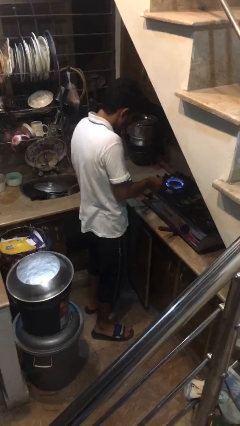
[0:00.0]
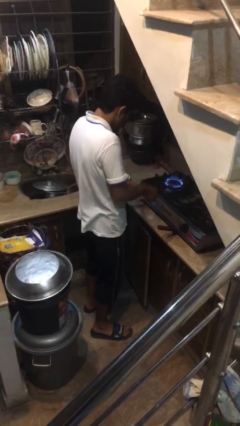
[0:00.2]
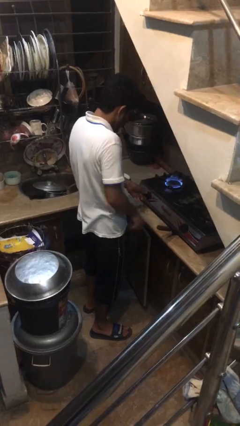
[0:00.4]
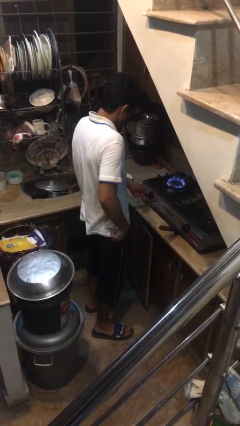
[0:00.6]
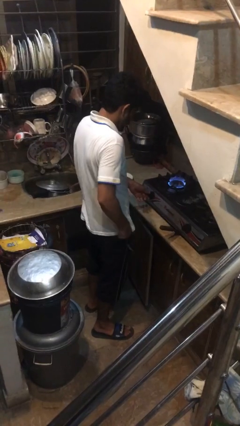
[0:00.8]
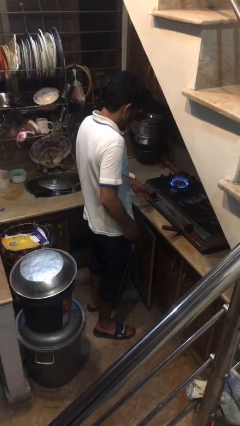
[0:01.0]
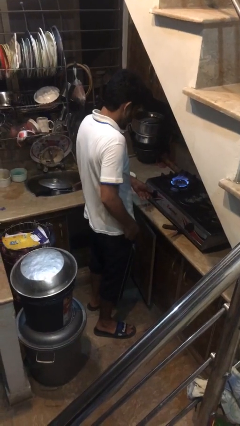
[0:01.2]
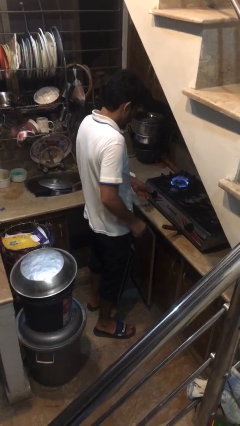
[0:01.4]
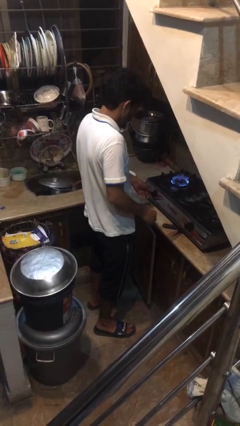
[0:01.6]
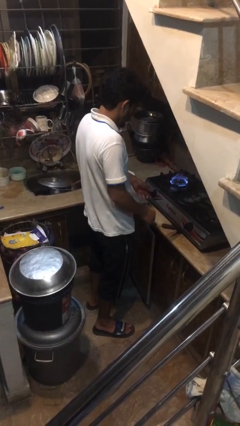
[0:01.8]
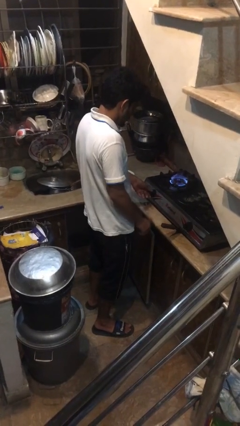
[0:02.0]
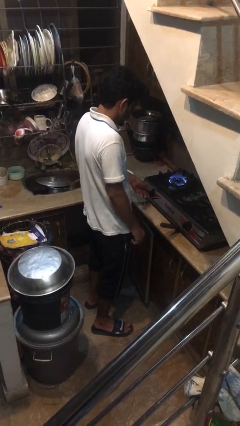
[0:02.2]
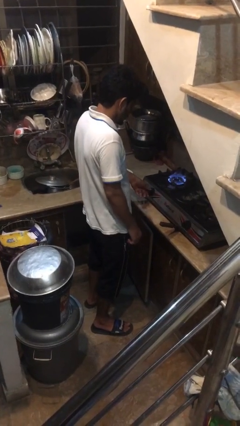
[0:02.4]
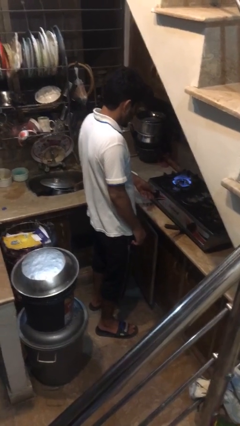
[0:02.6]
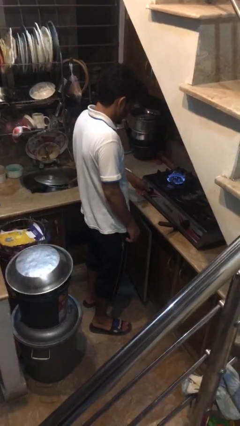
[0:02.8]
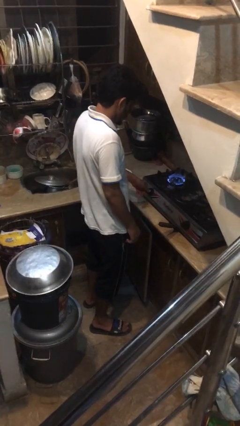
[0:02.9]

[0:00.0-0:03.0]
person turns on stovetop

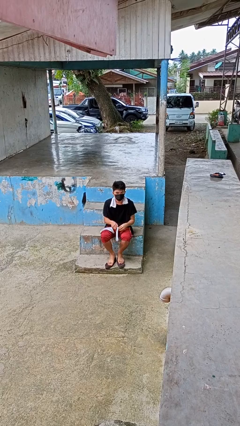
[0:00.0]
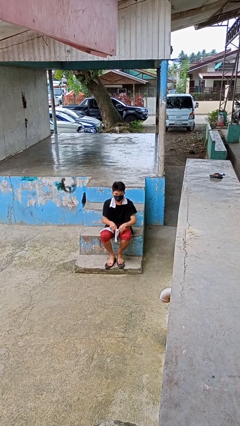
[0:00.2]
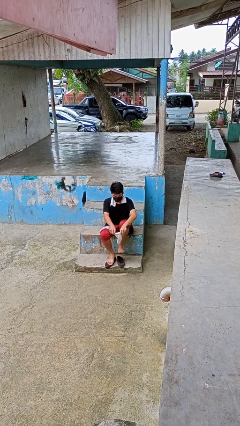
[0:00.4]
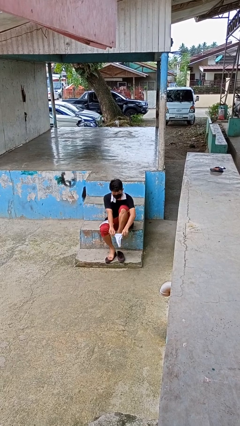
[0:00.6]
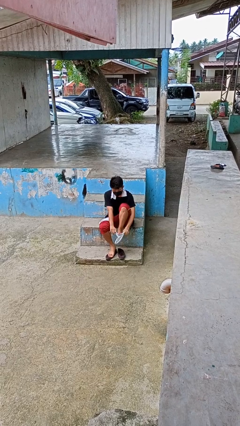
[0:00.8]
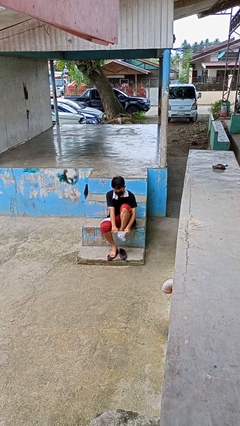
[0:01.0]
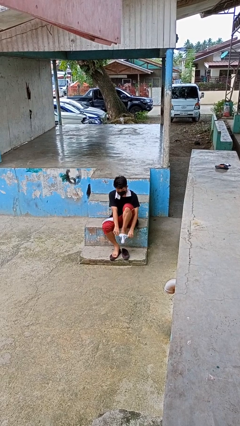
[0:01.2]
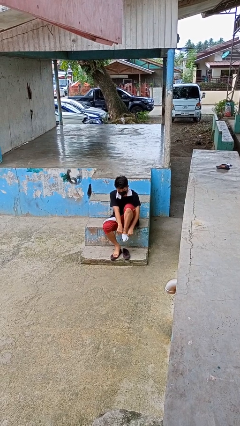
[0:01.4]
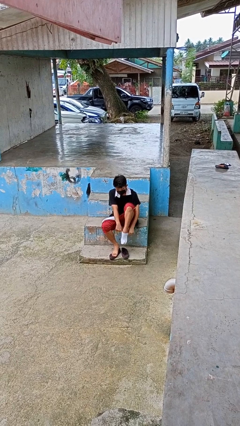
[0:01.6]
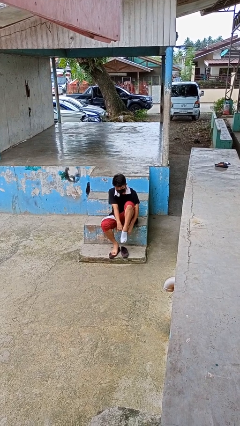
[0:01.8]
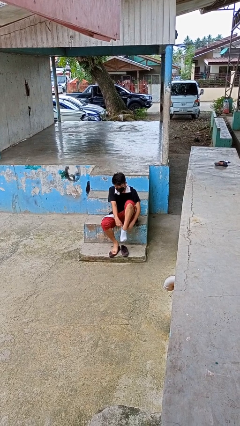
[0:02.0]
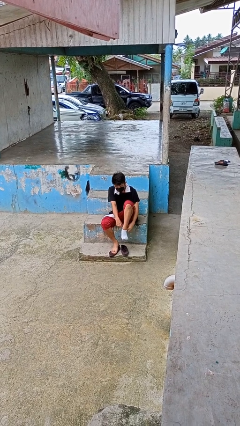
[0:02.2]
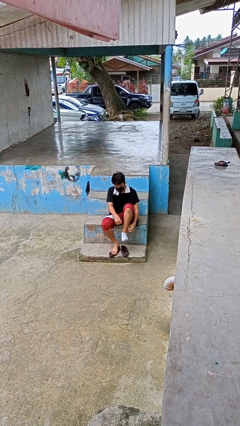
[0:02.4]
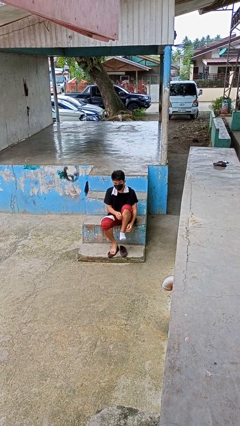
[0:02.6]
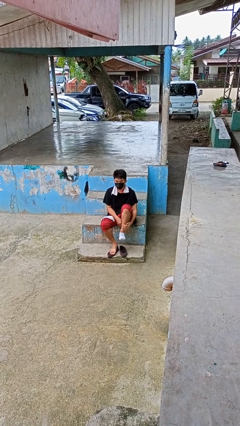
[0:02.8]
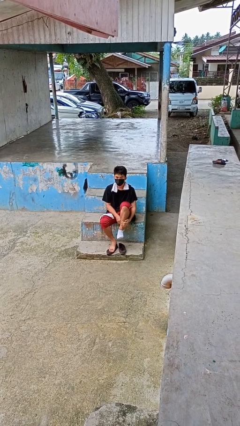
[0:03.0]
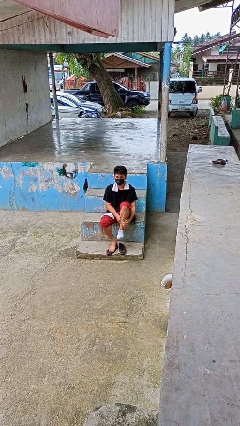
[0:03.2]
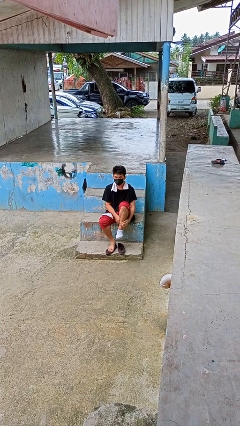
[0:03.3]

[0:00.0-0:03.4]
person puts on socks

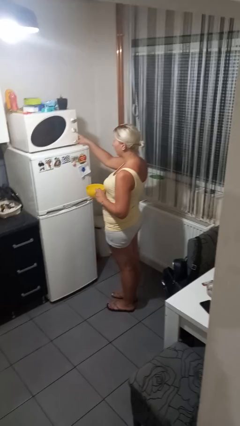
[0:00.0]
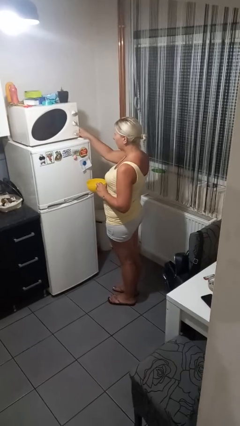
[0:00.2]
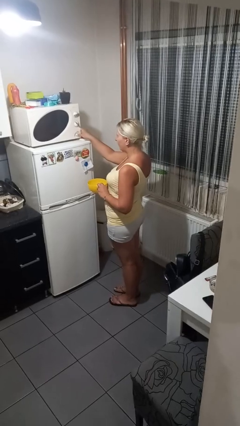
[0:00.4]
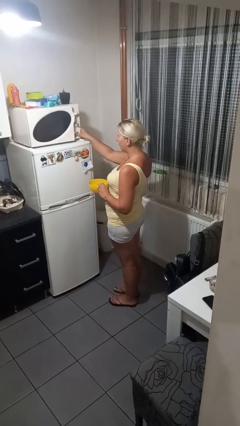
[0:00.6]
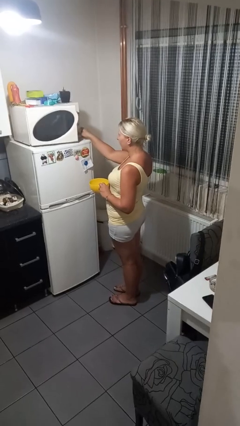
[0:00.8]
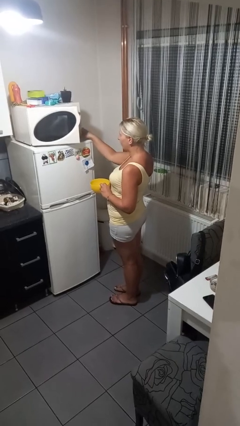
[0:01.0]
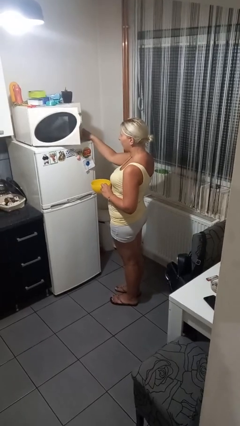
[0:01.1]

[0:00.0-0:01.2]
person opens microwave

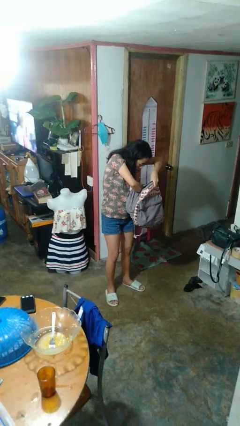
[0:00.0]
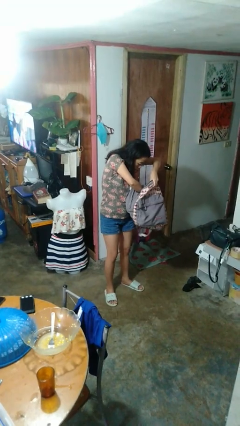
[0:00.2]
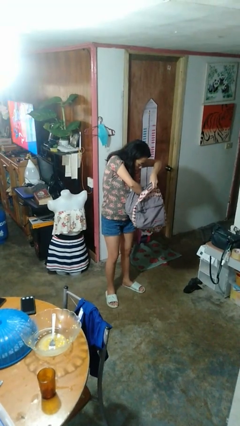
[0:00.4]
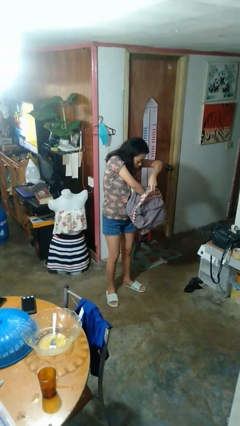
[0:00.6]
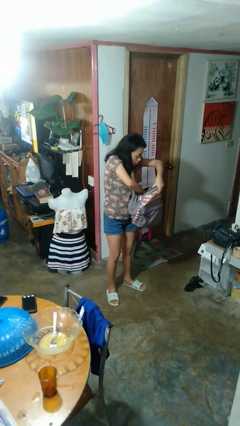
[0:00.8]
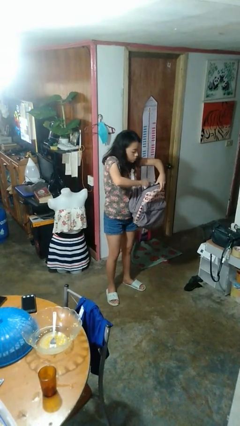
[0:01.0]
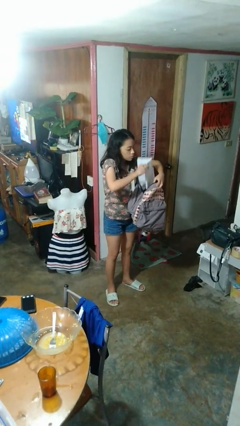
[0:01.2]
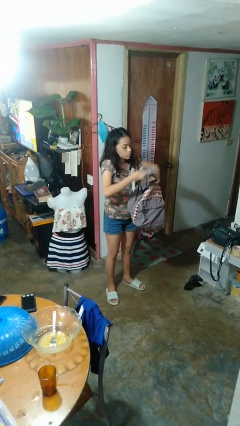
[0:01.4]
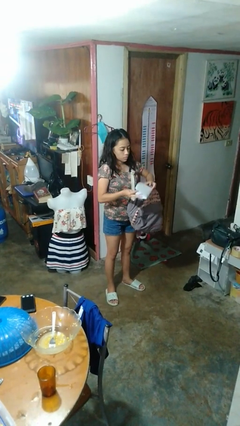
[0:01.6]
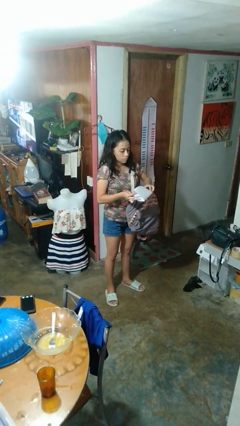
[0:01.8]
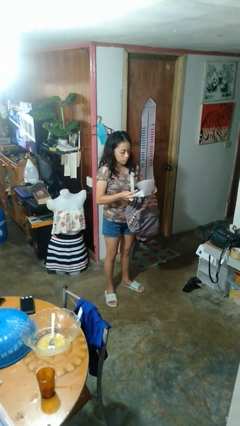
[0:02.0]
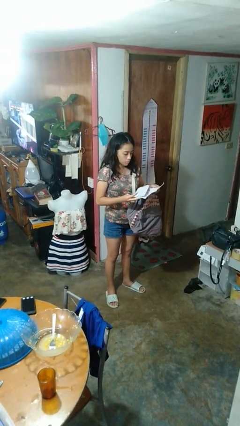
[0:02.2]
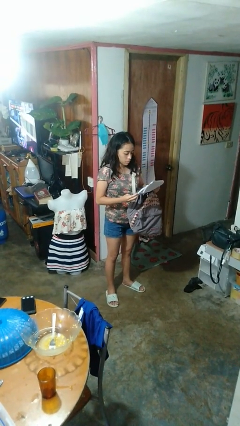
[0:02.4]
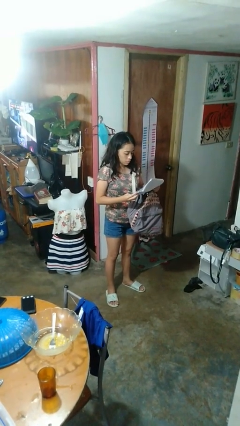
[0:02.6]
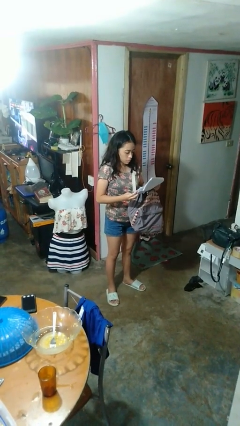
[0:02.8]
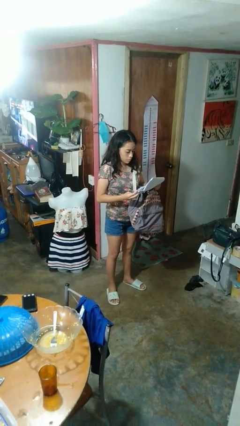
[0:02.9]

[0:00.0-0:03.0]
person takes object from backpack

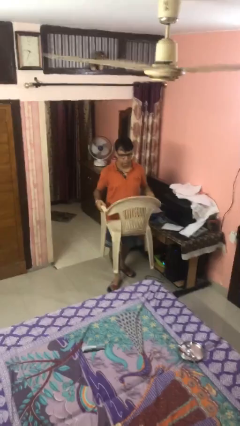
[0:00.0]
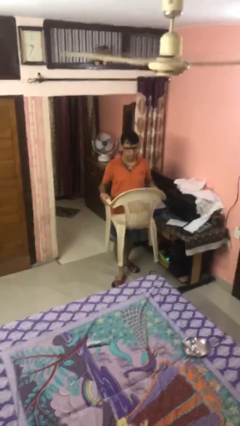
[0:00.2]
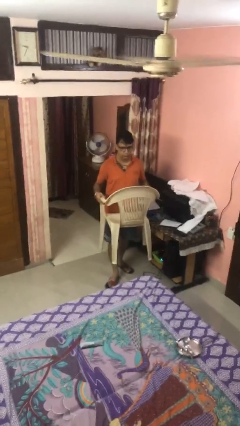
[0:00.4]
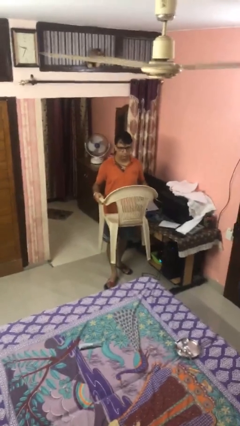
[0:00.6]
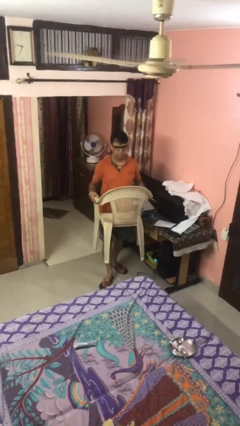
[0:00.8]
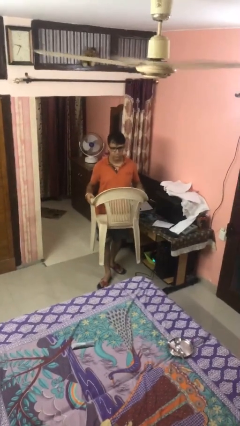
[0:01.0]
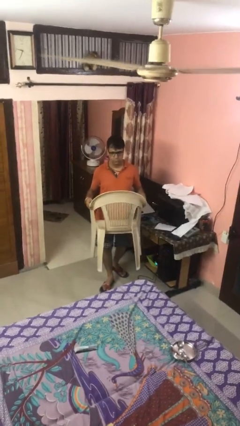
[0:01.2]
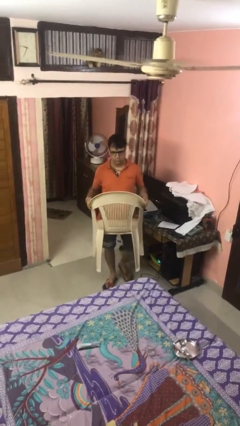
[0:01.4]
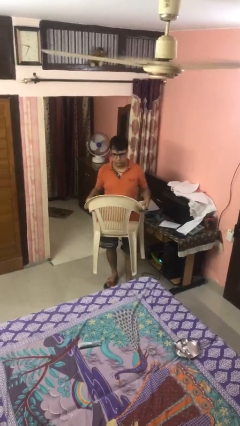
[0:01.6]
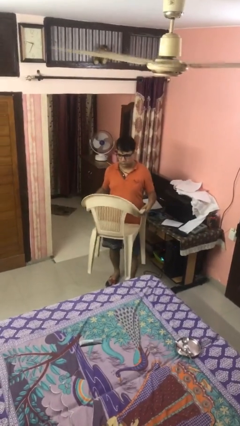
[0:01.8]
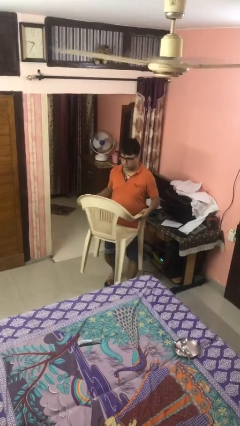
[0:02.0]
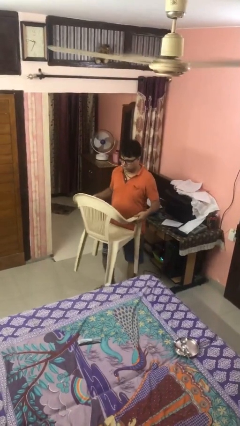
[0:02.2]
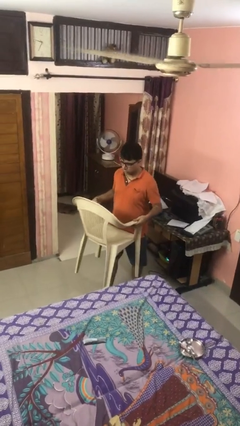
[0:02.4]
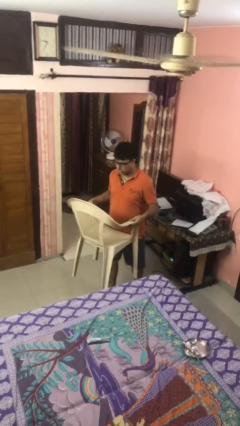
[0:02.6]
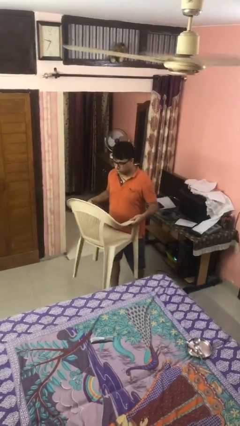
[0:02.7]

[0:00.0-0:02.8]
person carries furniture

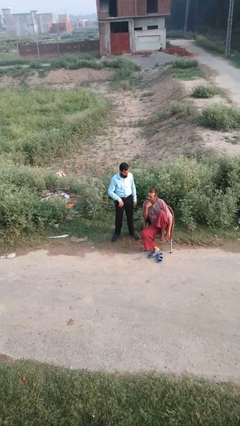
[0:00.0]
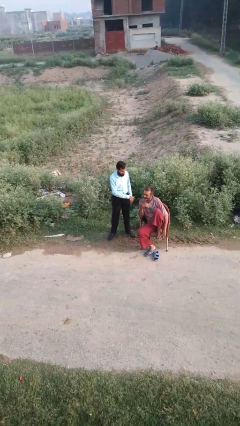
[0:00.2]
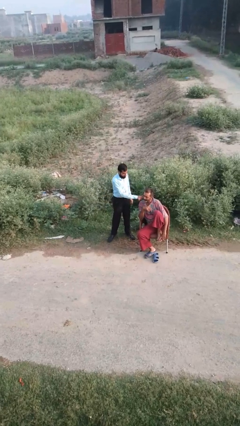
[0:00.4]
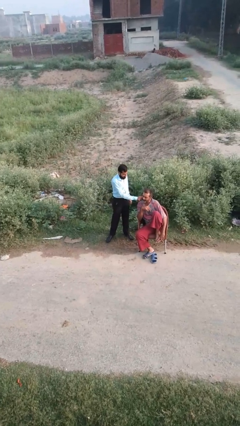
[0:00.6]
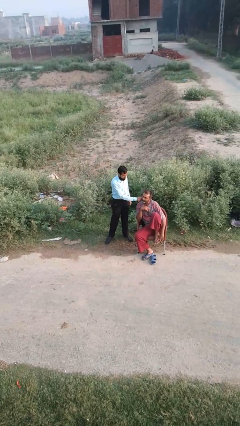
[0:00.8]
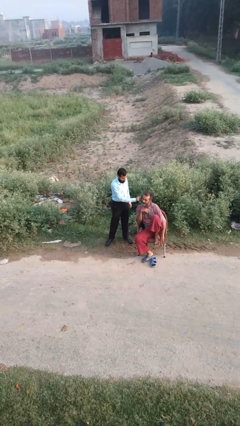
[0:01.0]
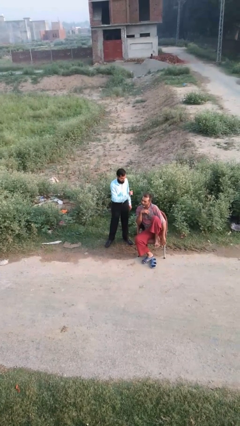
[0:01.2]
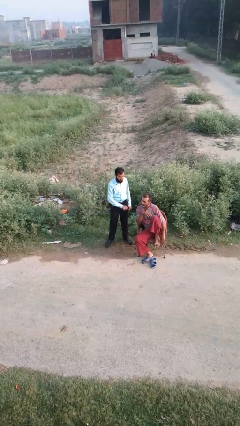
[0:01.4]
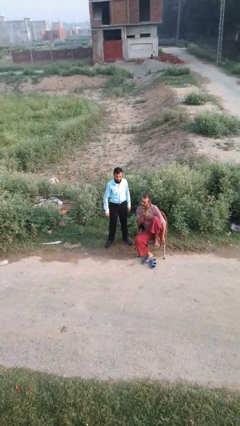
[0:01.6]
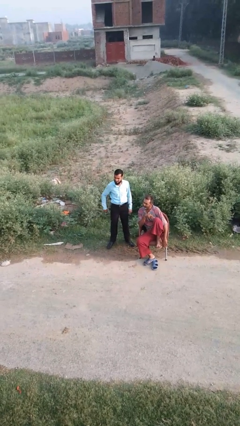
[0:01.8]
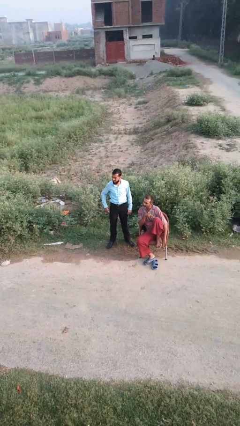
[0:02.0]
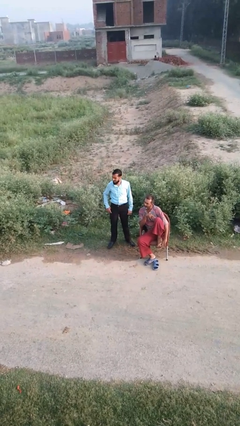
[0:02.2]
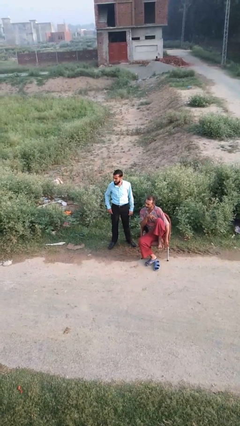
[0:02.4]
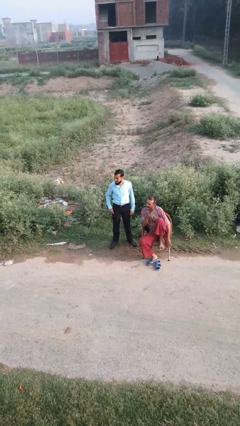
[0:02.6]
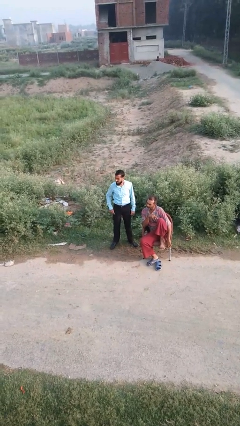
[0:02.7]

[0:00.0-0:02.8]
person touches face of person

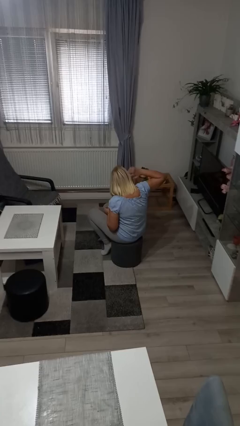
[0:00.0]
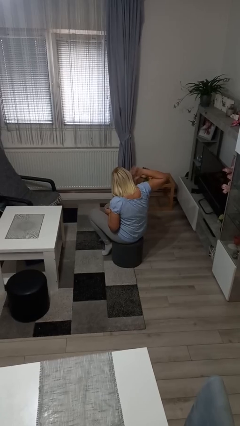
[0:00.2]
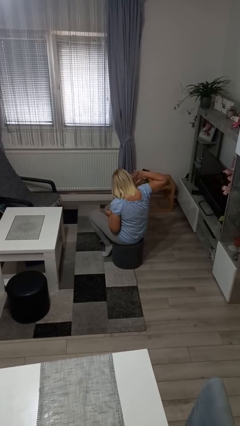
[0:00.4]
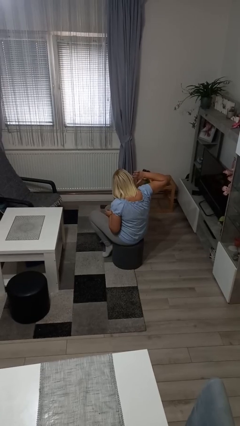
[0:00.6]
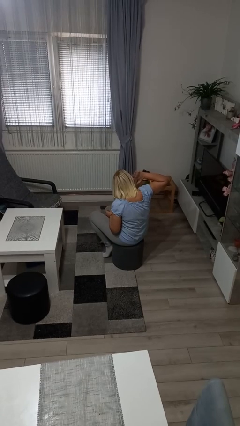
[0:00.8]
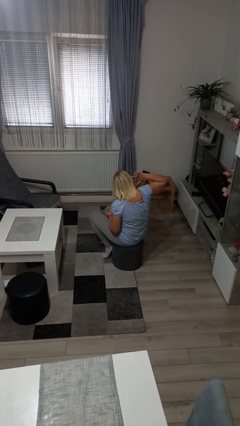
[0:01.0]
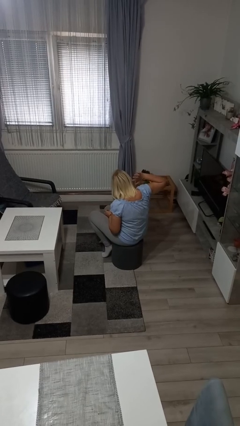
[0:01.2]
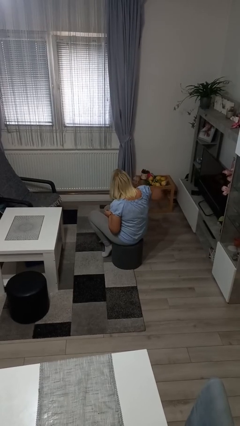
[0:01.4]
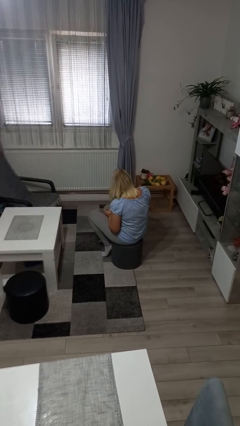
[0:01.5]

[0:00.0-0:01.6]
person touches earlobe
